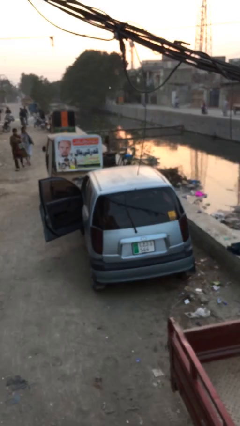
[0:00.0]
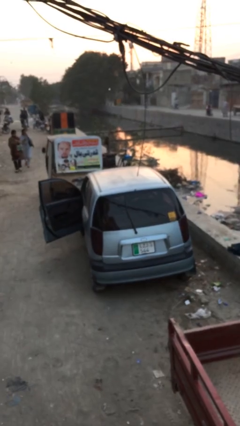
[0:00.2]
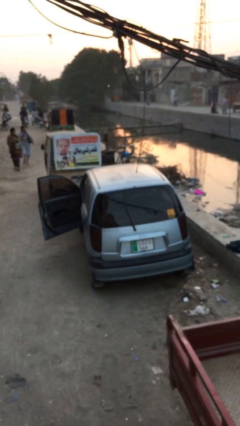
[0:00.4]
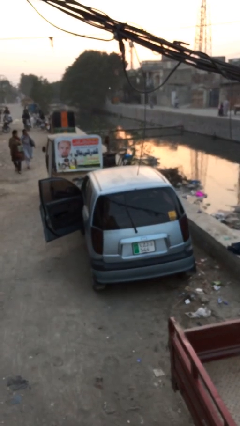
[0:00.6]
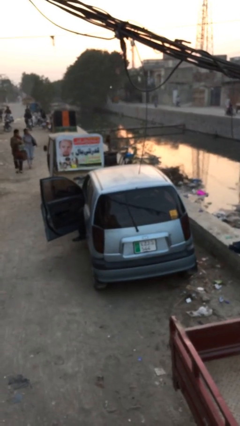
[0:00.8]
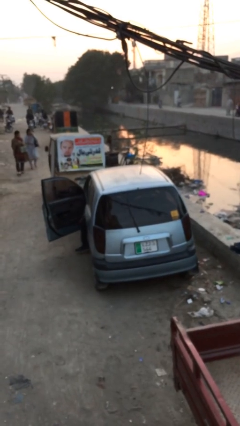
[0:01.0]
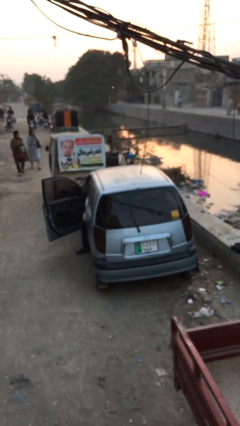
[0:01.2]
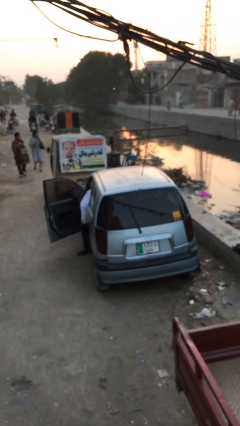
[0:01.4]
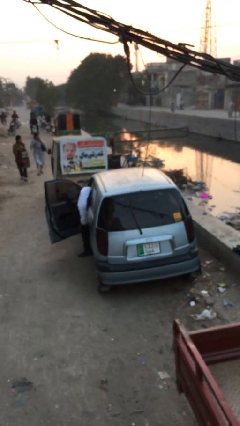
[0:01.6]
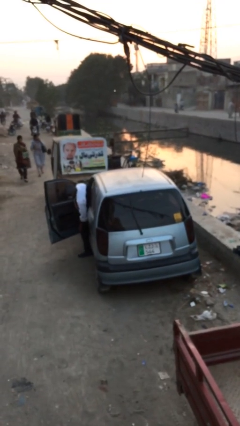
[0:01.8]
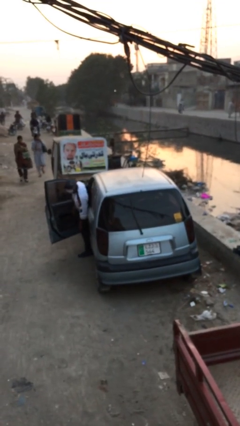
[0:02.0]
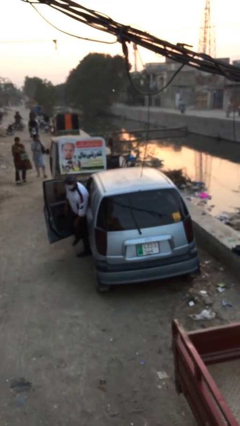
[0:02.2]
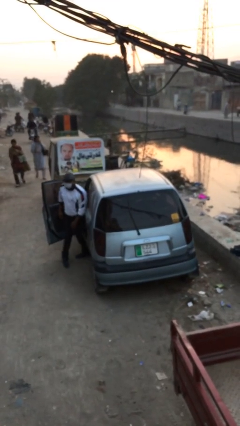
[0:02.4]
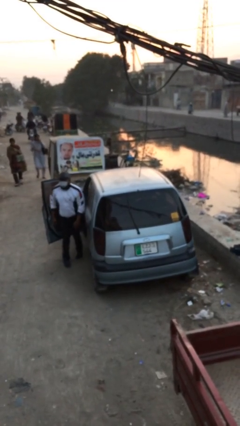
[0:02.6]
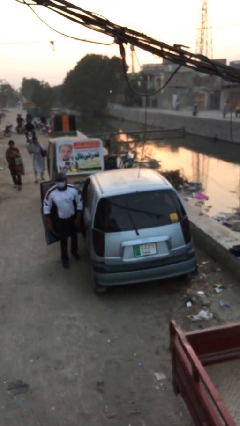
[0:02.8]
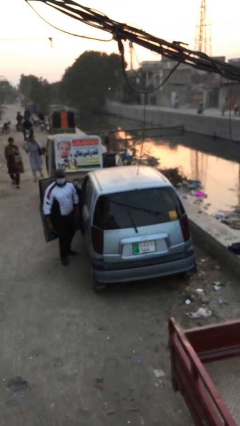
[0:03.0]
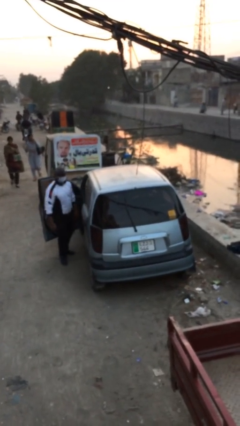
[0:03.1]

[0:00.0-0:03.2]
person exits car

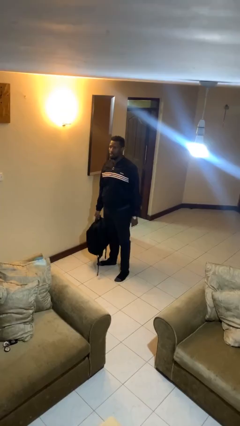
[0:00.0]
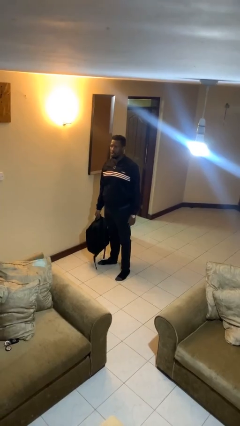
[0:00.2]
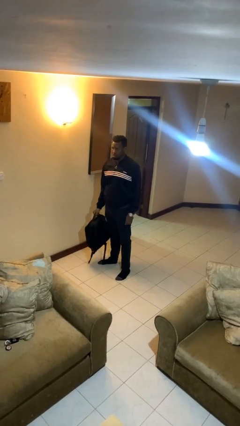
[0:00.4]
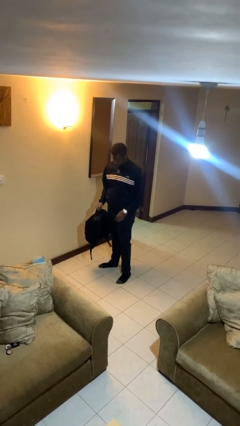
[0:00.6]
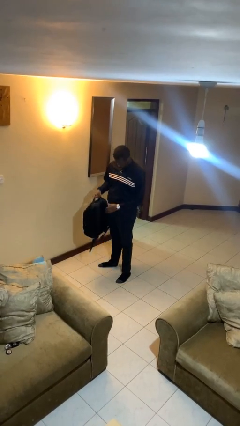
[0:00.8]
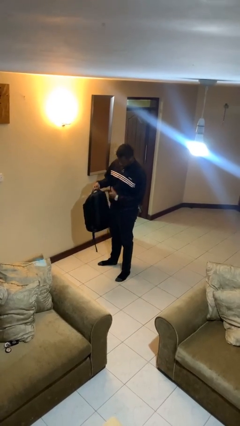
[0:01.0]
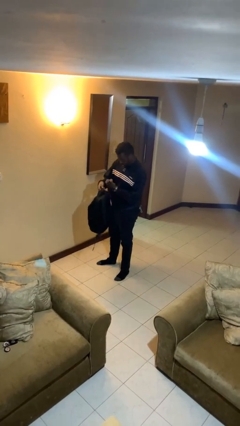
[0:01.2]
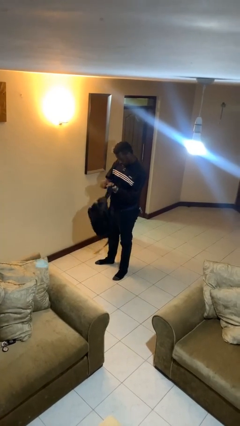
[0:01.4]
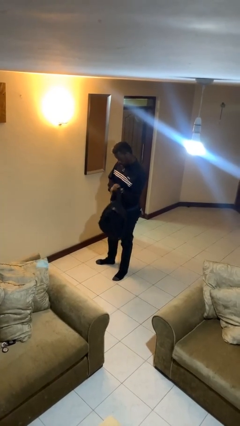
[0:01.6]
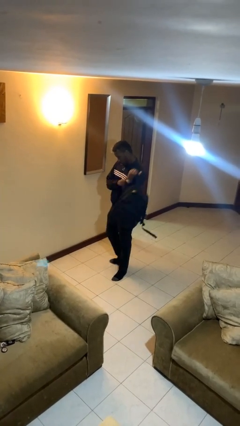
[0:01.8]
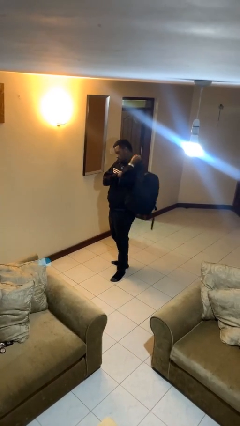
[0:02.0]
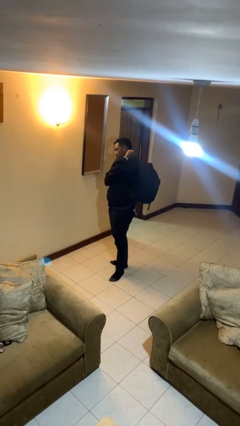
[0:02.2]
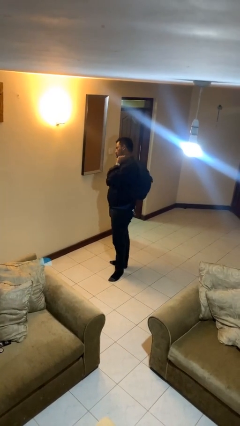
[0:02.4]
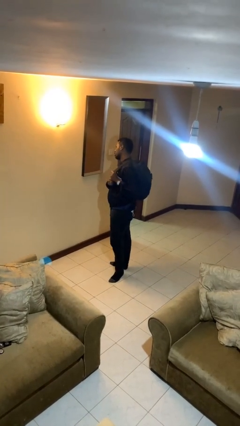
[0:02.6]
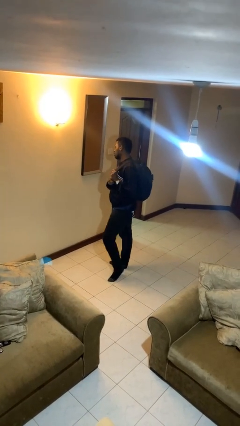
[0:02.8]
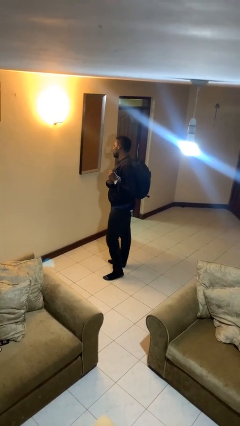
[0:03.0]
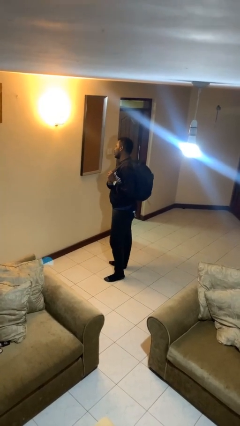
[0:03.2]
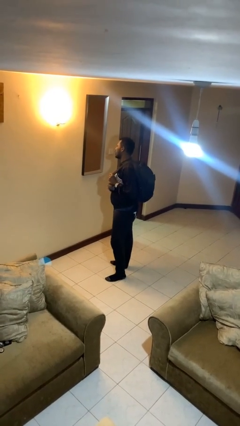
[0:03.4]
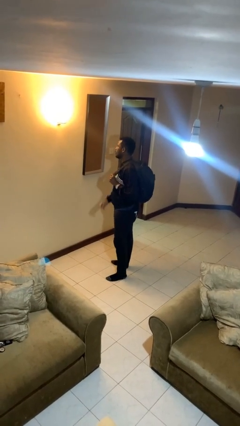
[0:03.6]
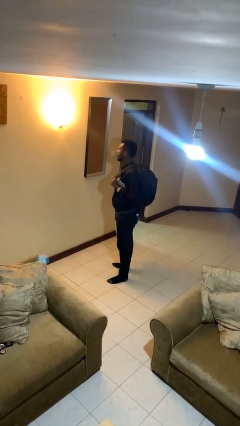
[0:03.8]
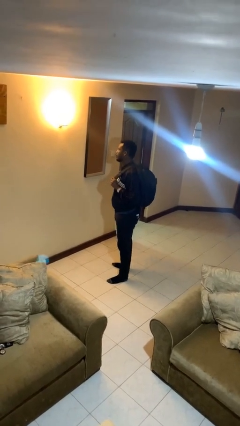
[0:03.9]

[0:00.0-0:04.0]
person puts on backpack

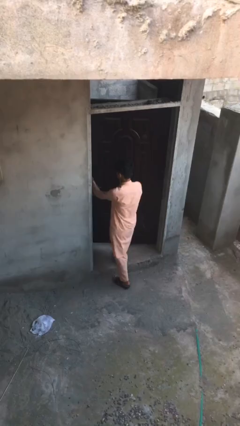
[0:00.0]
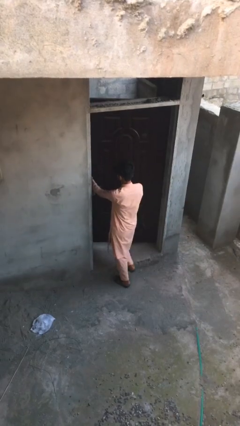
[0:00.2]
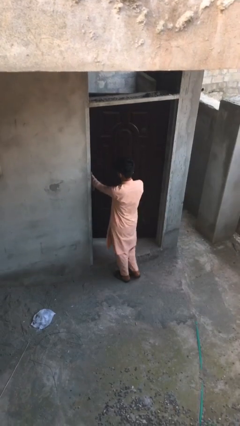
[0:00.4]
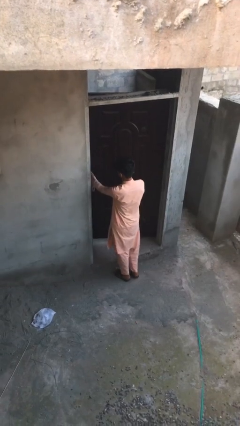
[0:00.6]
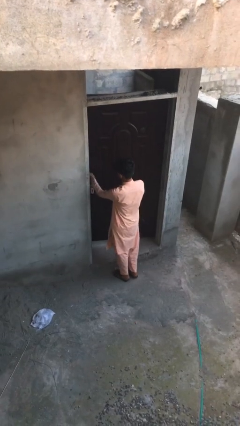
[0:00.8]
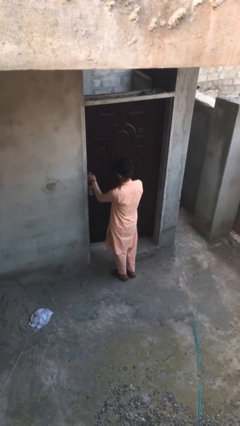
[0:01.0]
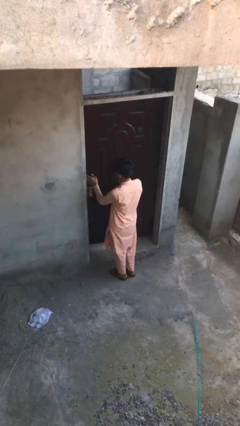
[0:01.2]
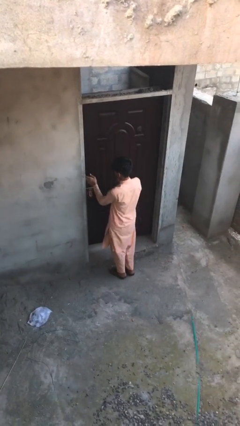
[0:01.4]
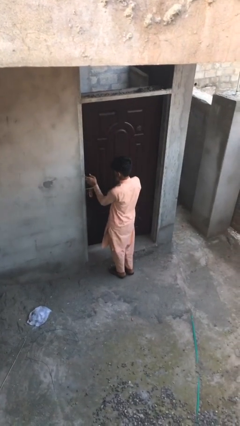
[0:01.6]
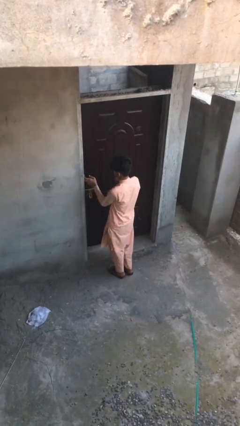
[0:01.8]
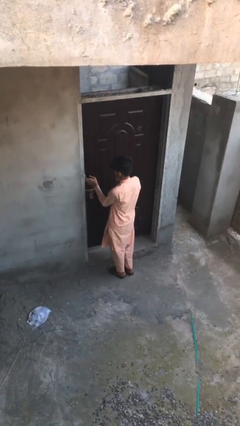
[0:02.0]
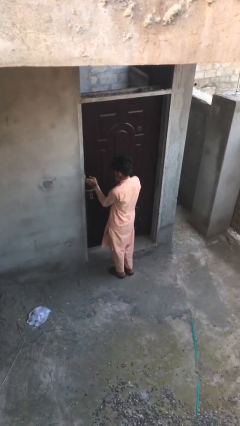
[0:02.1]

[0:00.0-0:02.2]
person closes facility door

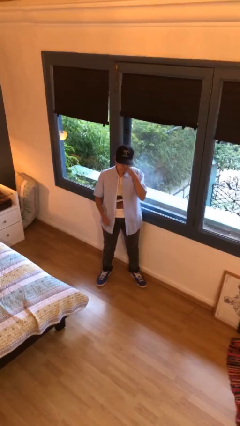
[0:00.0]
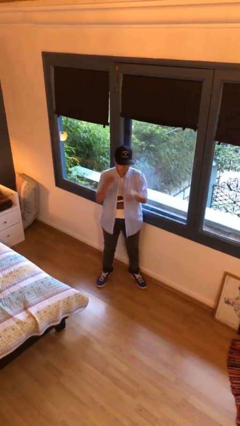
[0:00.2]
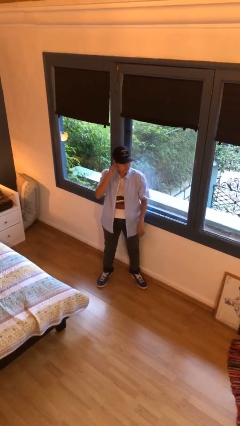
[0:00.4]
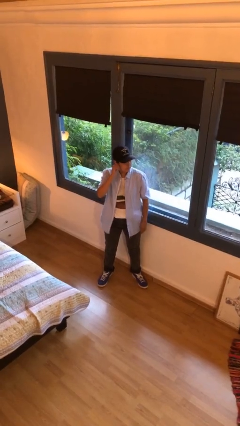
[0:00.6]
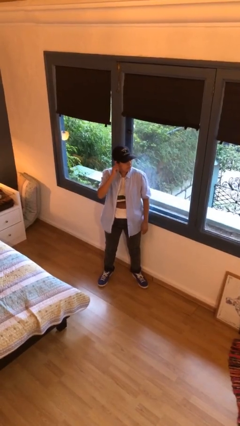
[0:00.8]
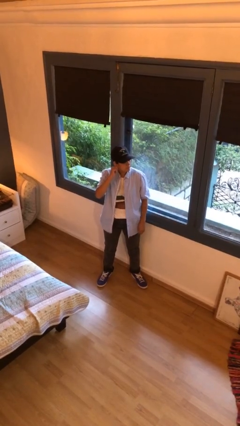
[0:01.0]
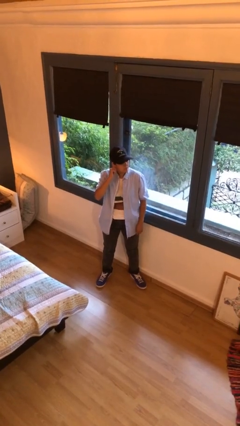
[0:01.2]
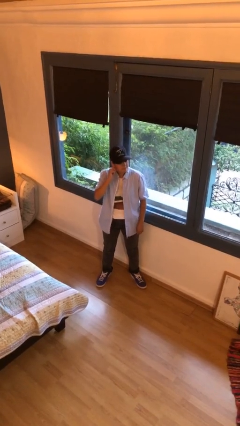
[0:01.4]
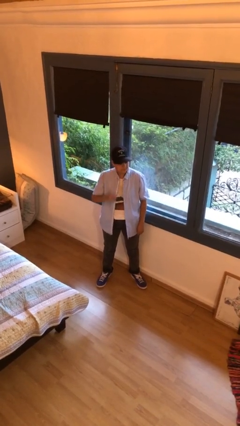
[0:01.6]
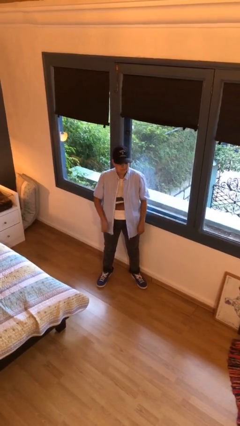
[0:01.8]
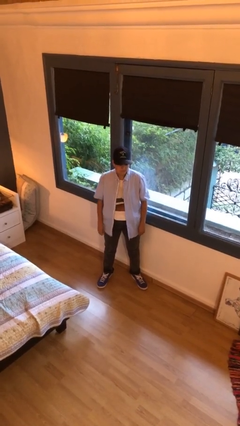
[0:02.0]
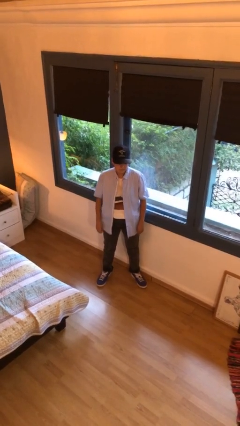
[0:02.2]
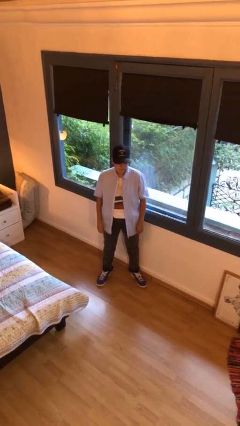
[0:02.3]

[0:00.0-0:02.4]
person touches earlobe

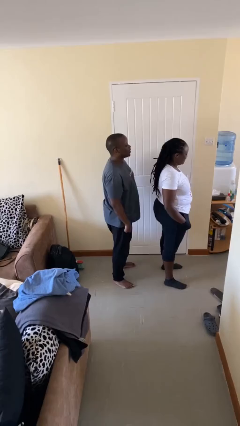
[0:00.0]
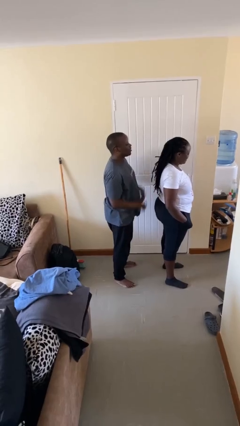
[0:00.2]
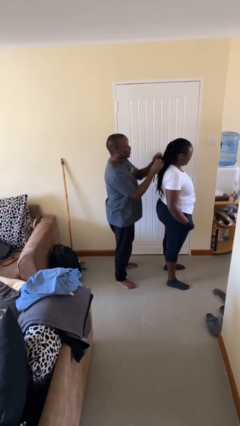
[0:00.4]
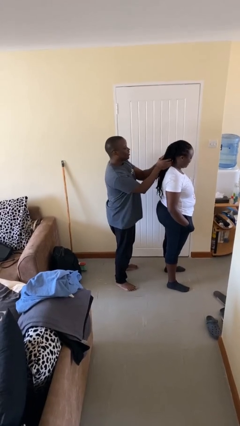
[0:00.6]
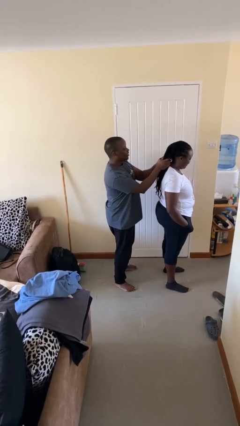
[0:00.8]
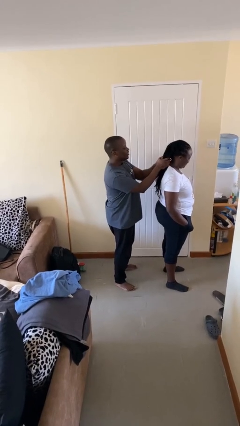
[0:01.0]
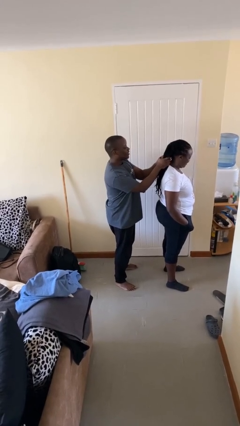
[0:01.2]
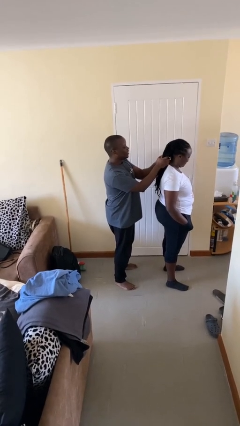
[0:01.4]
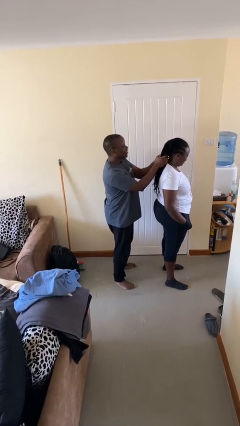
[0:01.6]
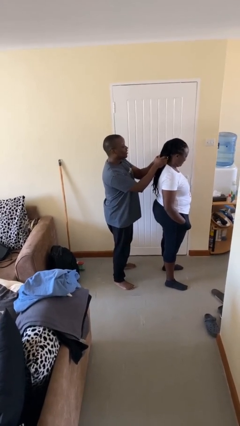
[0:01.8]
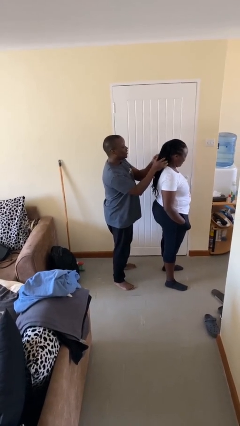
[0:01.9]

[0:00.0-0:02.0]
person grabs person by hair

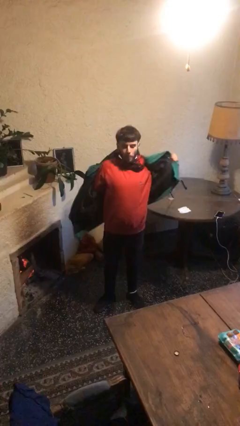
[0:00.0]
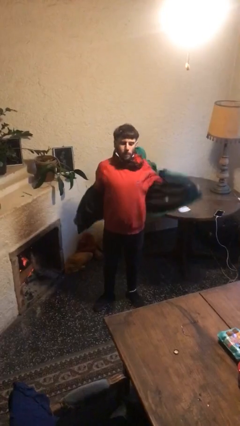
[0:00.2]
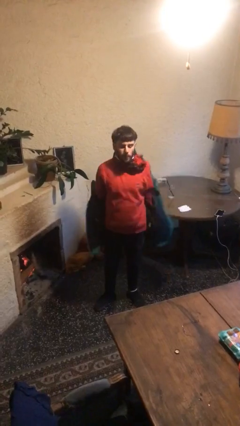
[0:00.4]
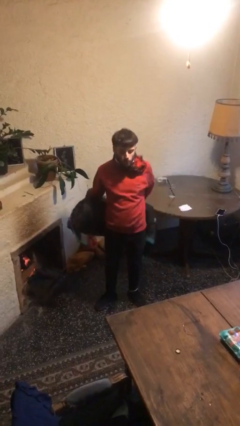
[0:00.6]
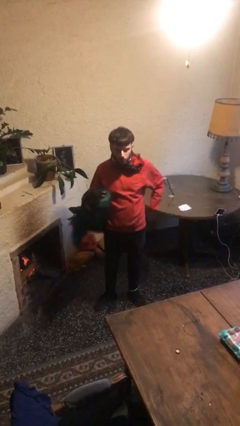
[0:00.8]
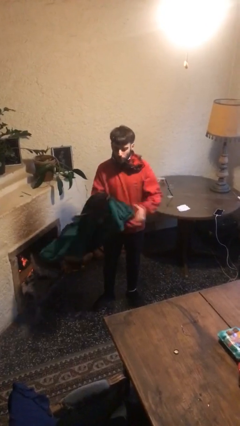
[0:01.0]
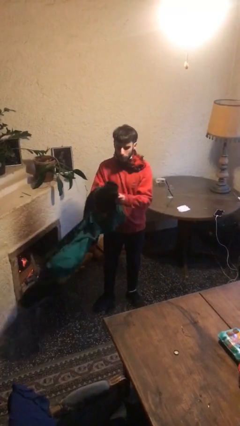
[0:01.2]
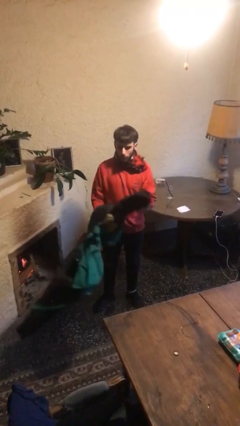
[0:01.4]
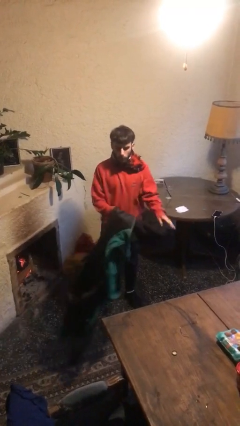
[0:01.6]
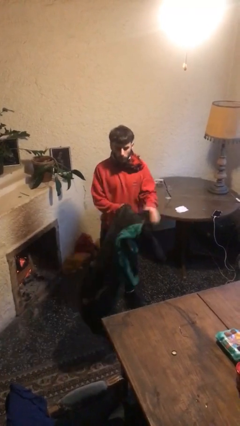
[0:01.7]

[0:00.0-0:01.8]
person takes off jacket

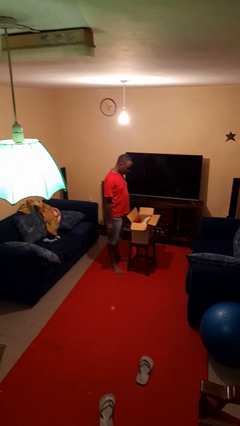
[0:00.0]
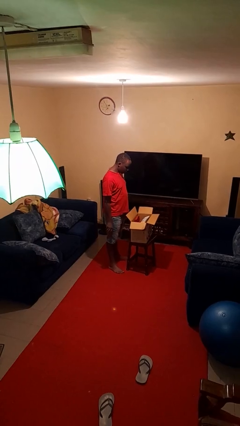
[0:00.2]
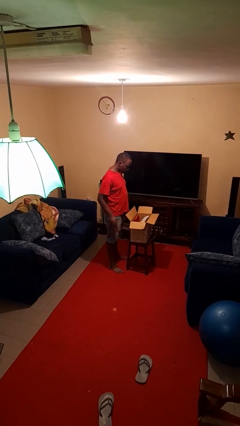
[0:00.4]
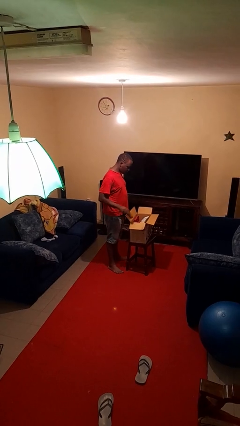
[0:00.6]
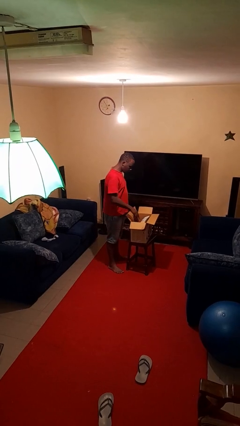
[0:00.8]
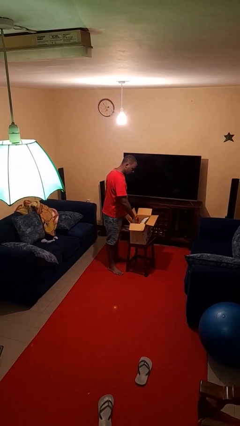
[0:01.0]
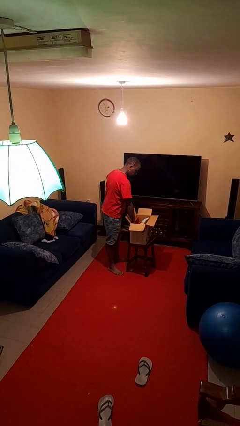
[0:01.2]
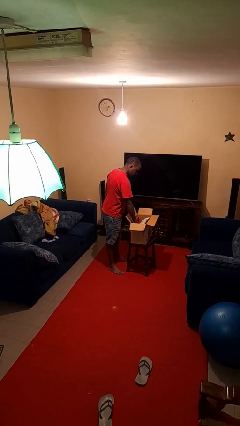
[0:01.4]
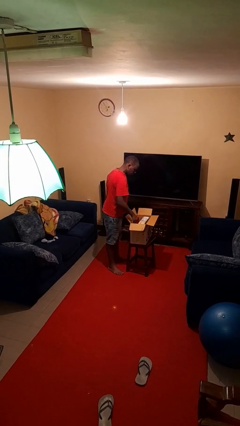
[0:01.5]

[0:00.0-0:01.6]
person puts object into box
